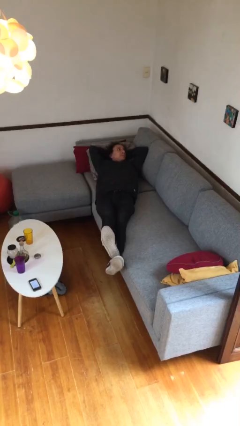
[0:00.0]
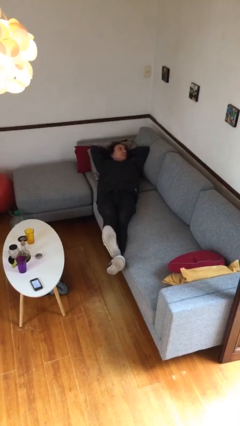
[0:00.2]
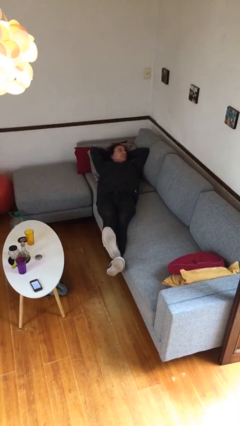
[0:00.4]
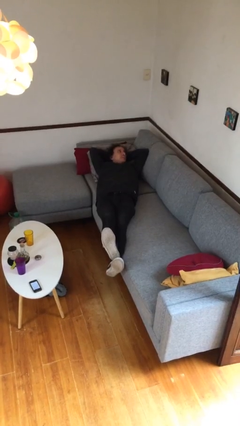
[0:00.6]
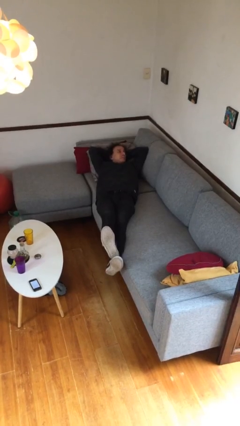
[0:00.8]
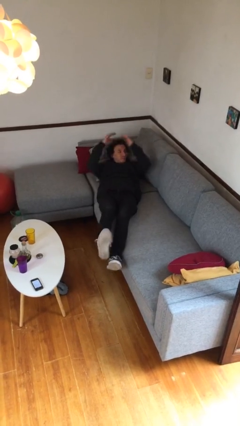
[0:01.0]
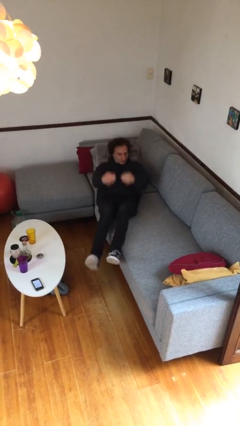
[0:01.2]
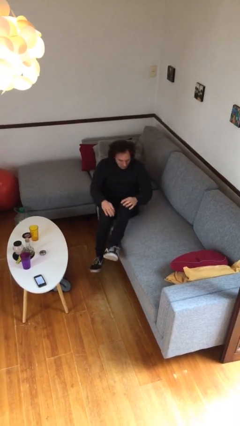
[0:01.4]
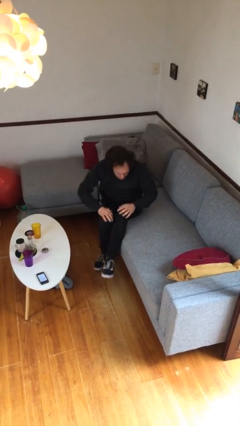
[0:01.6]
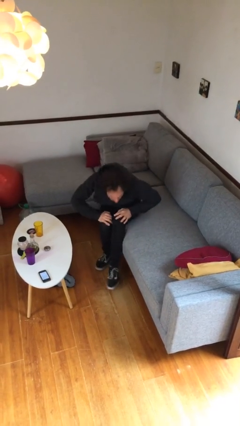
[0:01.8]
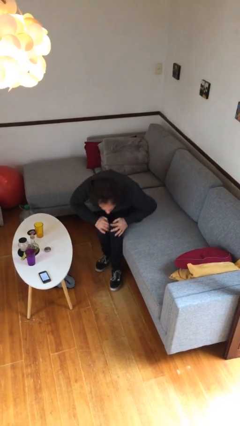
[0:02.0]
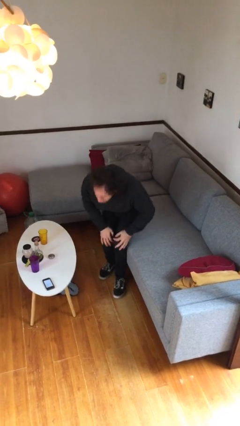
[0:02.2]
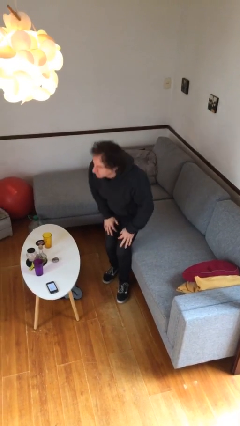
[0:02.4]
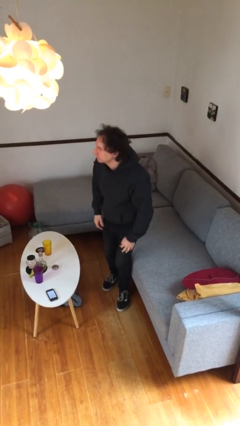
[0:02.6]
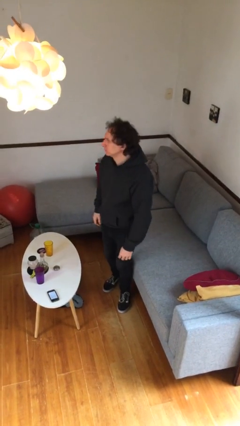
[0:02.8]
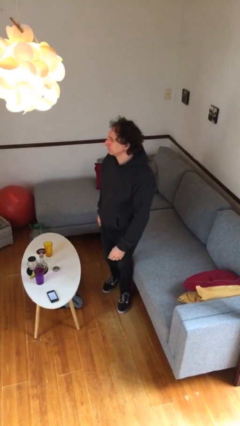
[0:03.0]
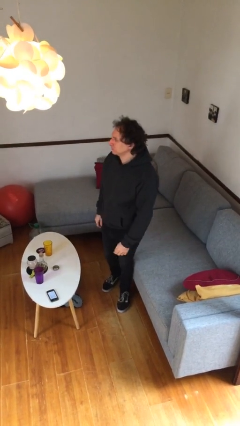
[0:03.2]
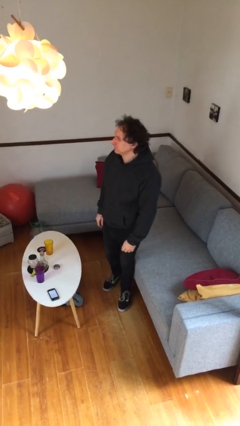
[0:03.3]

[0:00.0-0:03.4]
person stands up

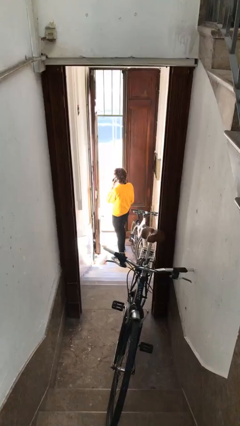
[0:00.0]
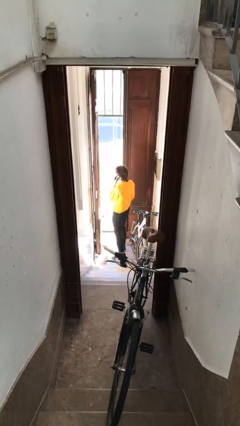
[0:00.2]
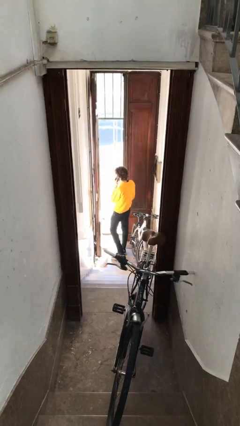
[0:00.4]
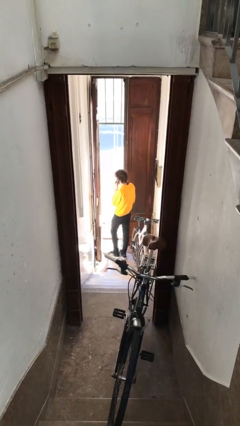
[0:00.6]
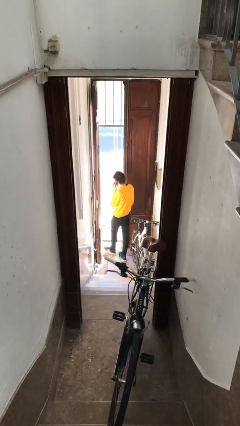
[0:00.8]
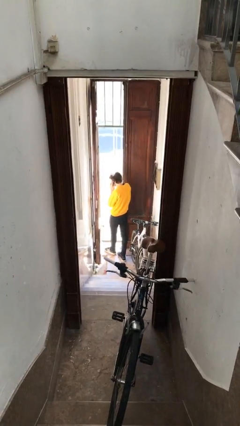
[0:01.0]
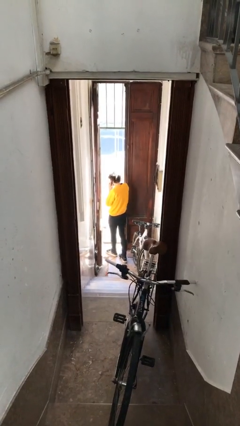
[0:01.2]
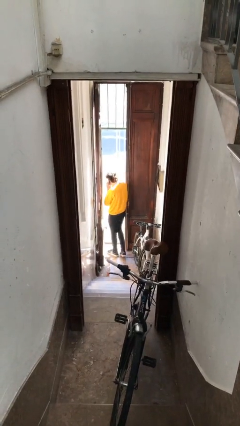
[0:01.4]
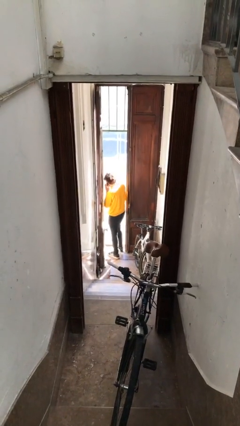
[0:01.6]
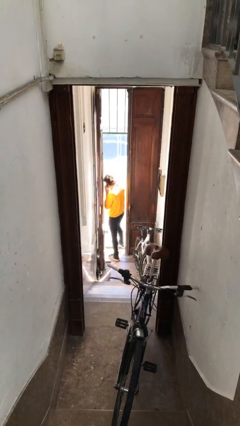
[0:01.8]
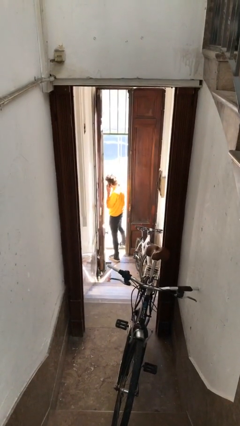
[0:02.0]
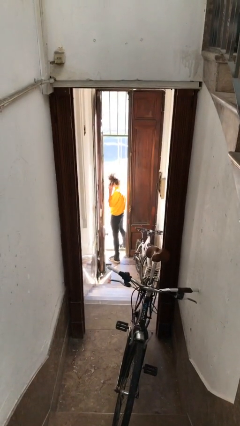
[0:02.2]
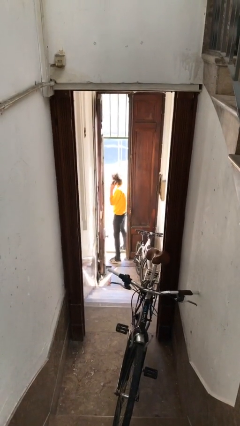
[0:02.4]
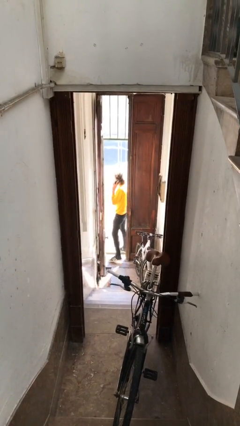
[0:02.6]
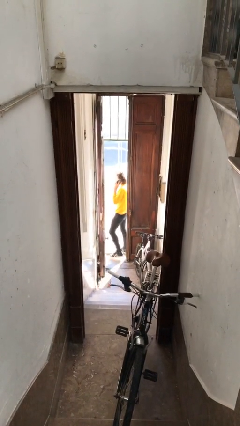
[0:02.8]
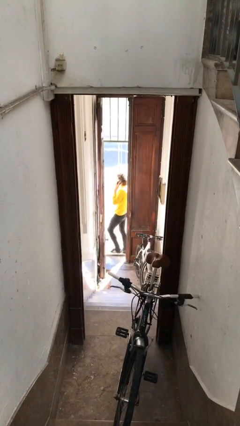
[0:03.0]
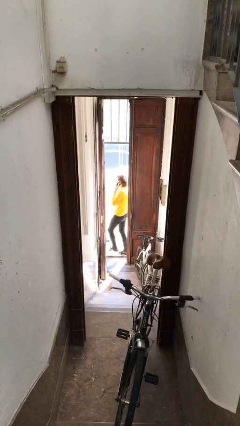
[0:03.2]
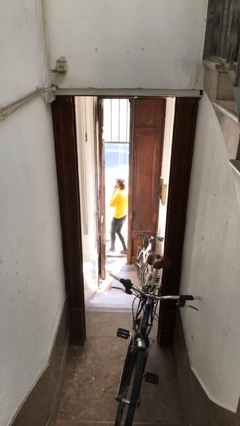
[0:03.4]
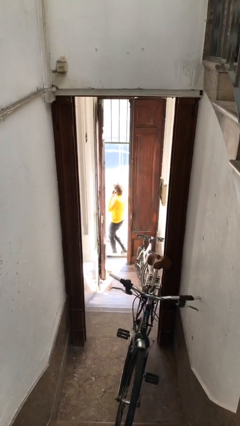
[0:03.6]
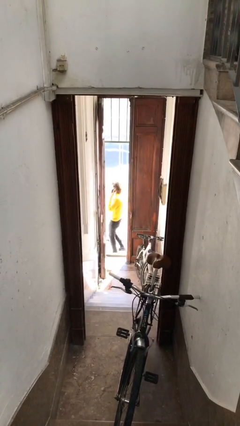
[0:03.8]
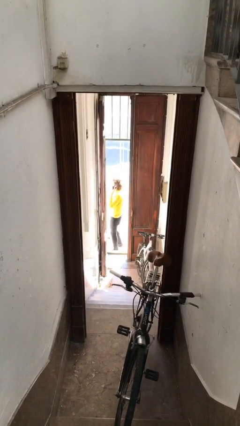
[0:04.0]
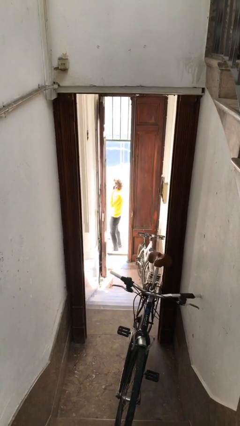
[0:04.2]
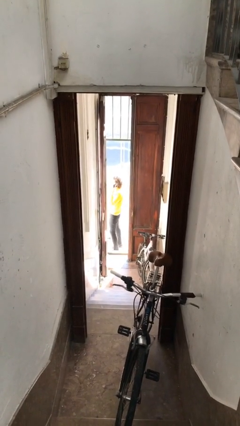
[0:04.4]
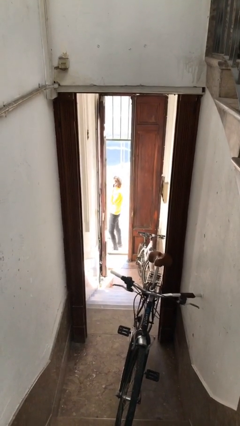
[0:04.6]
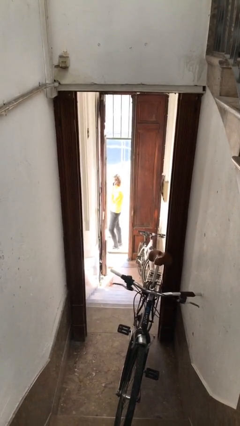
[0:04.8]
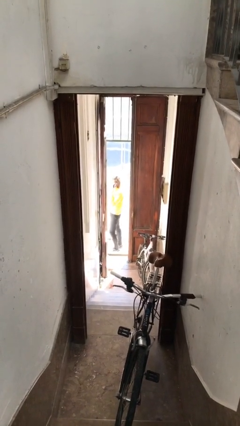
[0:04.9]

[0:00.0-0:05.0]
person exits scene through structure

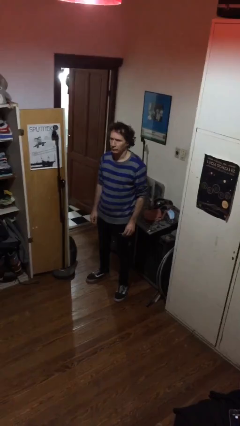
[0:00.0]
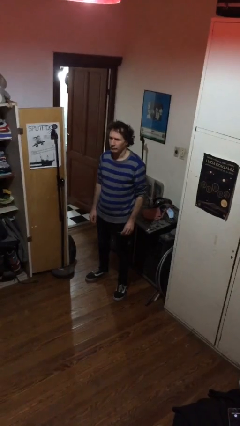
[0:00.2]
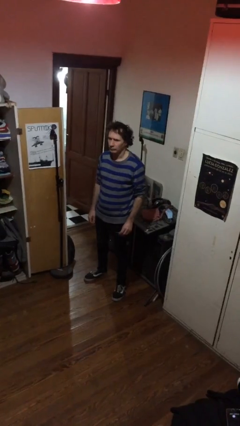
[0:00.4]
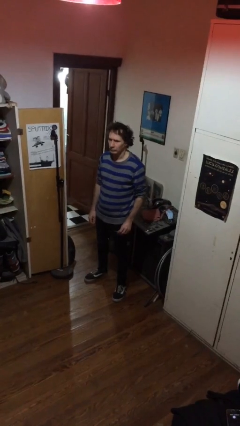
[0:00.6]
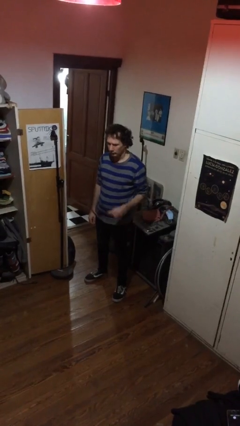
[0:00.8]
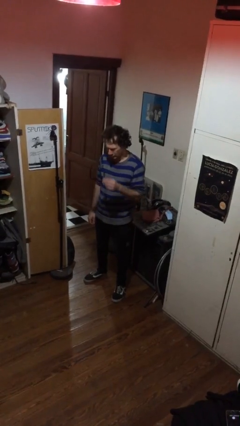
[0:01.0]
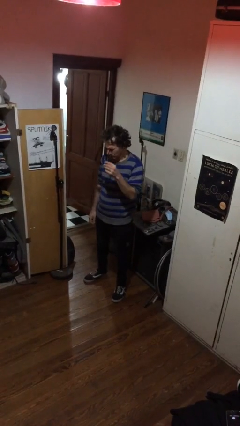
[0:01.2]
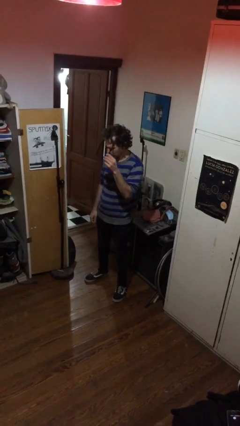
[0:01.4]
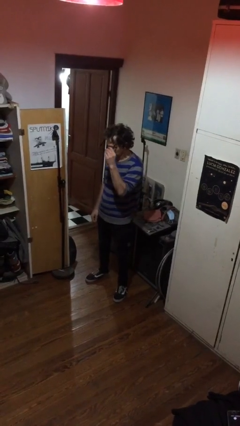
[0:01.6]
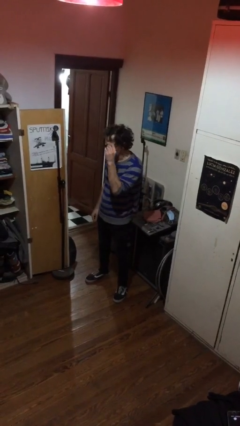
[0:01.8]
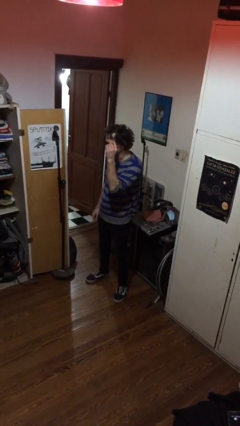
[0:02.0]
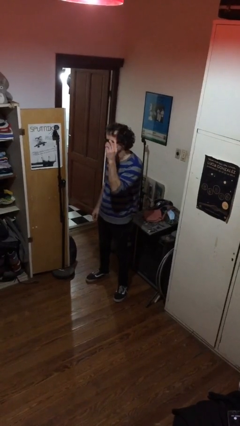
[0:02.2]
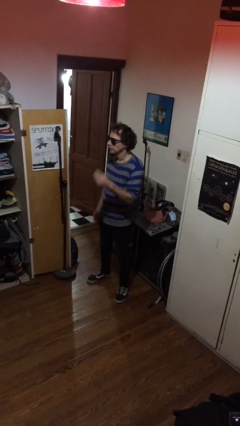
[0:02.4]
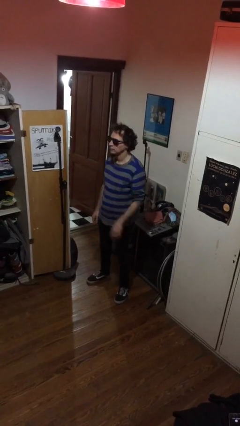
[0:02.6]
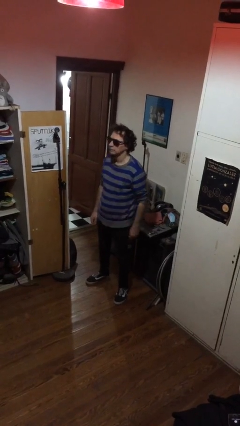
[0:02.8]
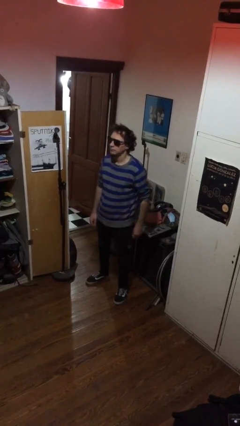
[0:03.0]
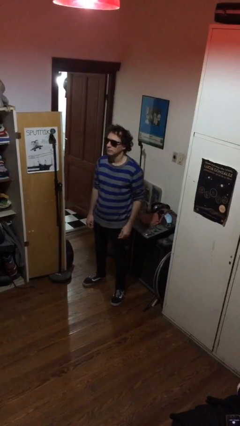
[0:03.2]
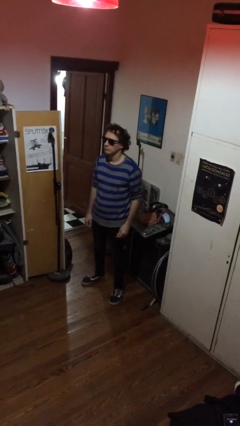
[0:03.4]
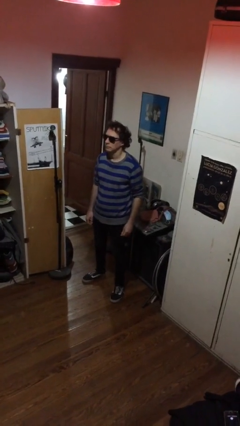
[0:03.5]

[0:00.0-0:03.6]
person puts on sunglasses

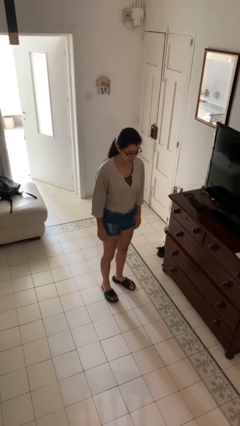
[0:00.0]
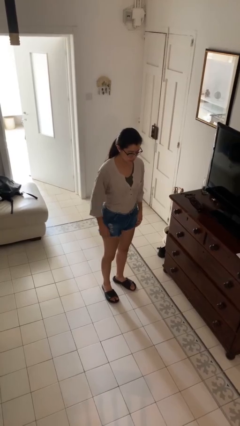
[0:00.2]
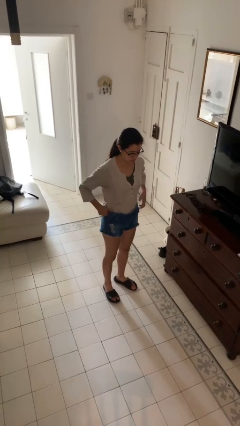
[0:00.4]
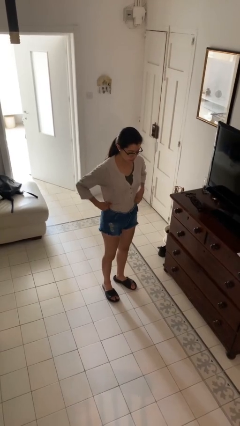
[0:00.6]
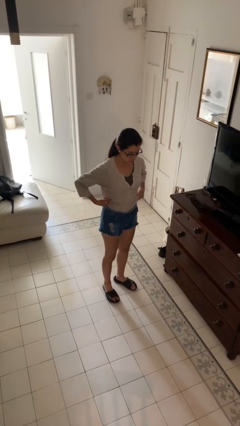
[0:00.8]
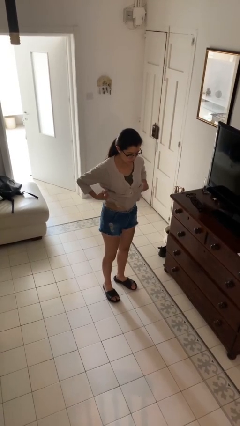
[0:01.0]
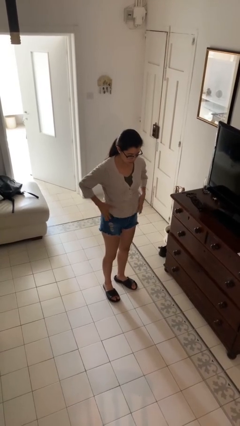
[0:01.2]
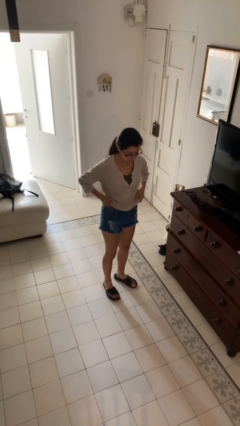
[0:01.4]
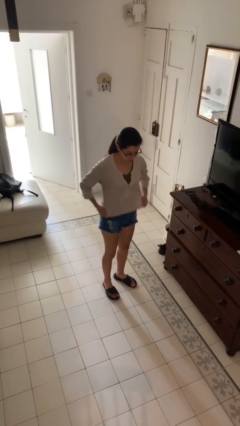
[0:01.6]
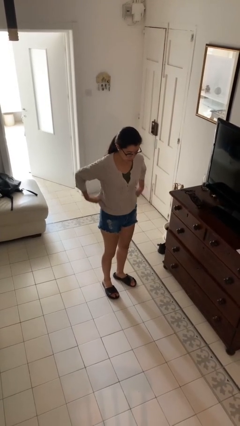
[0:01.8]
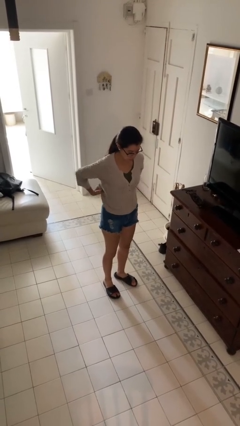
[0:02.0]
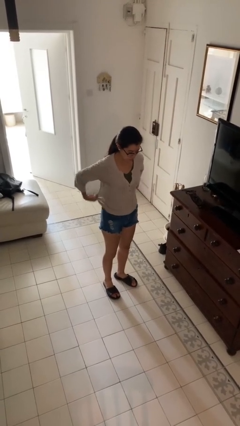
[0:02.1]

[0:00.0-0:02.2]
person untucks shirt

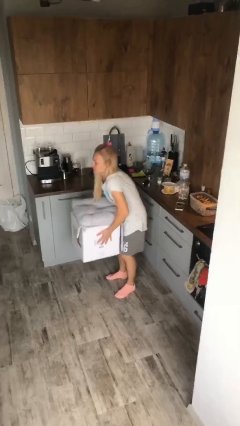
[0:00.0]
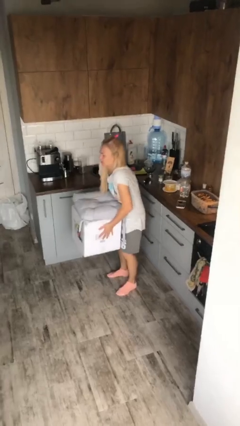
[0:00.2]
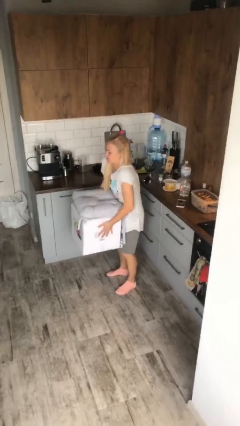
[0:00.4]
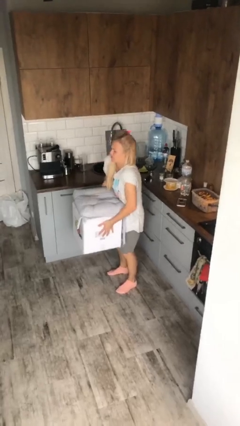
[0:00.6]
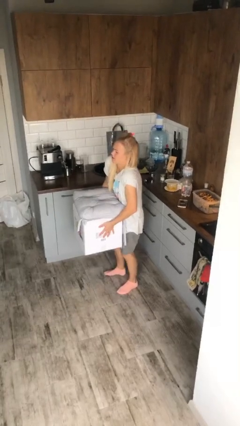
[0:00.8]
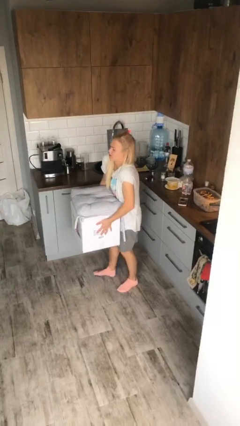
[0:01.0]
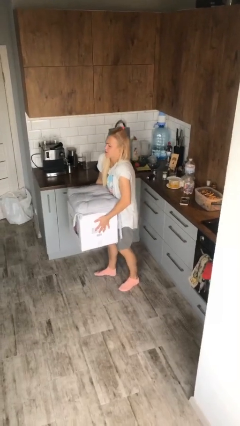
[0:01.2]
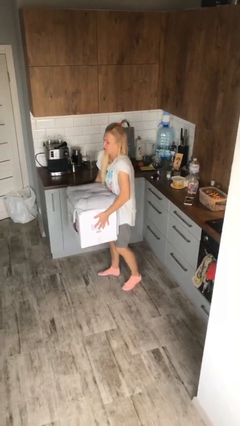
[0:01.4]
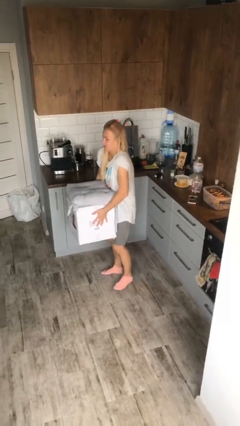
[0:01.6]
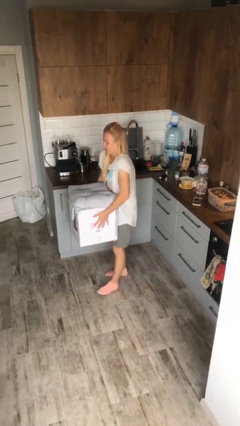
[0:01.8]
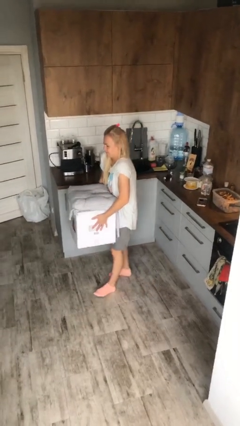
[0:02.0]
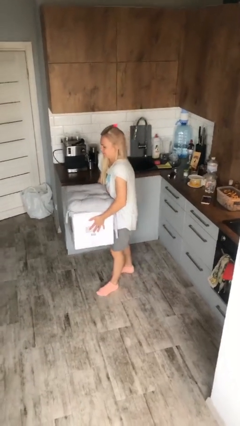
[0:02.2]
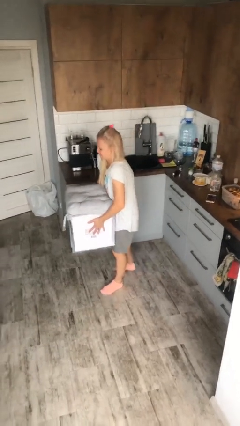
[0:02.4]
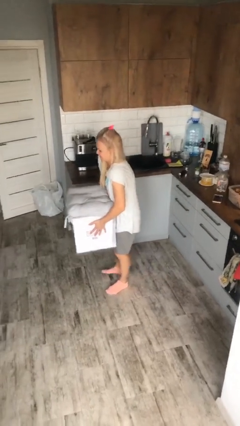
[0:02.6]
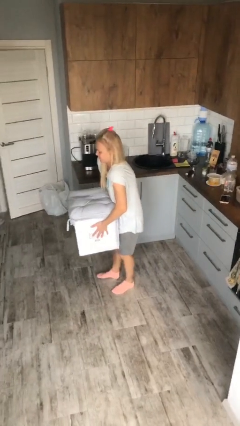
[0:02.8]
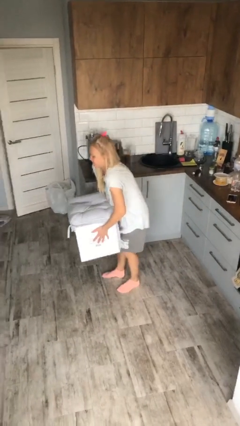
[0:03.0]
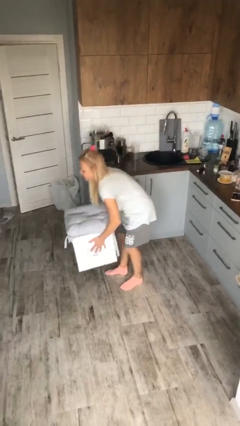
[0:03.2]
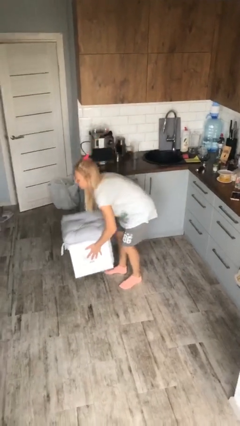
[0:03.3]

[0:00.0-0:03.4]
person carries heavy object
